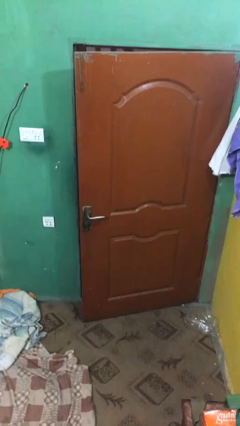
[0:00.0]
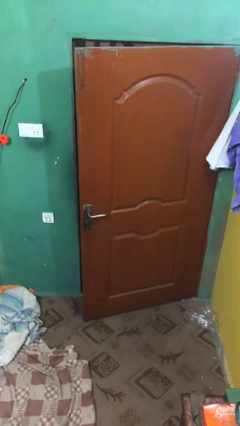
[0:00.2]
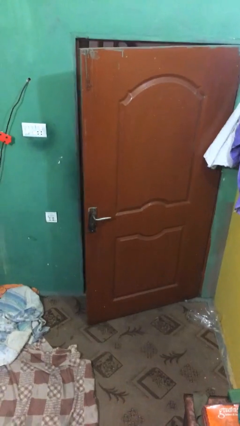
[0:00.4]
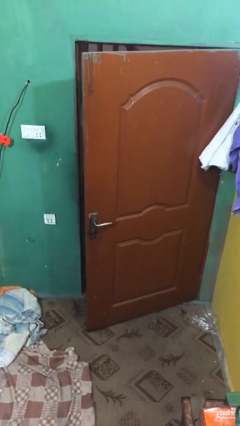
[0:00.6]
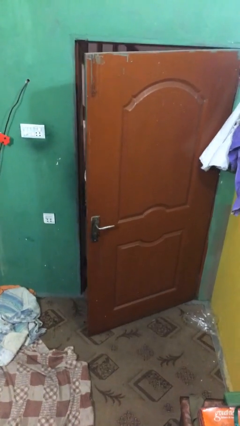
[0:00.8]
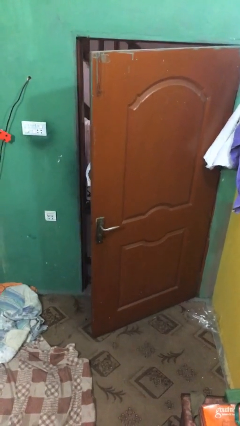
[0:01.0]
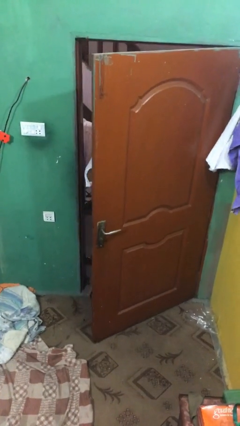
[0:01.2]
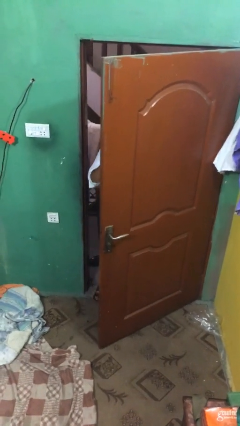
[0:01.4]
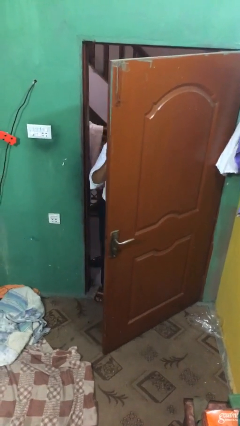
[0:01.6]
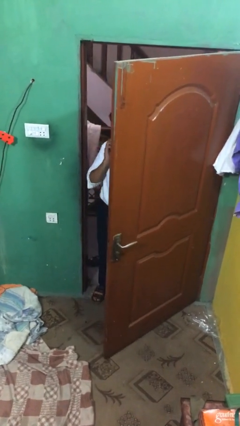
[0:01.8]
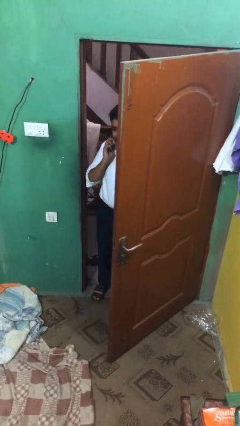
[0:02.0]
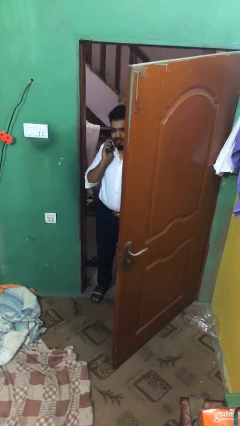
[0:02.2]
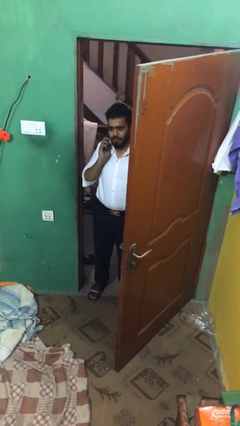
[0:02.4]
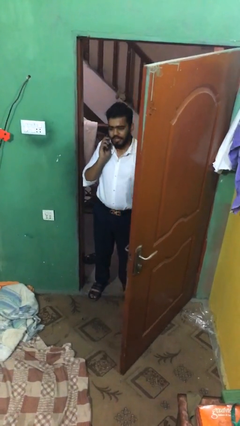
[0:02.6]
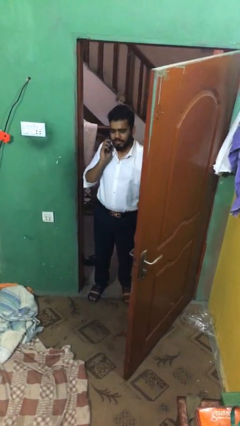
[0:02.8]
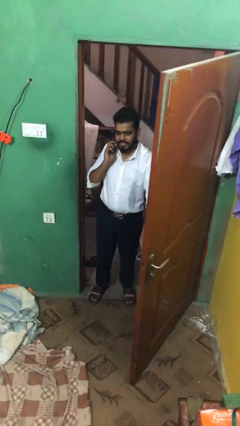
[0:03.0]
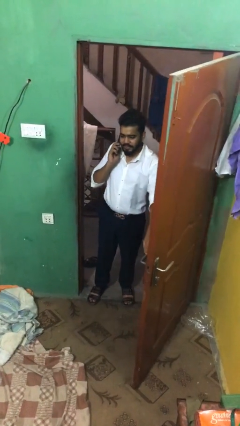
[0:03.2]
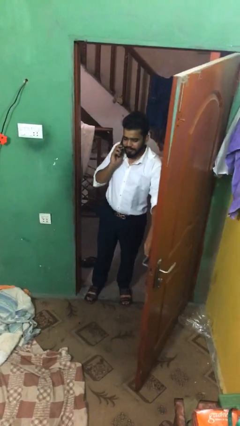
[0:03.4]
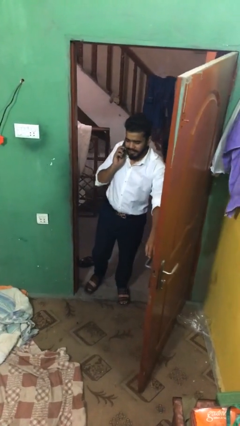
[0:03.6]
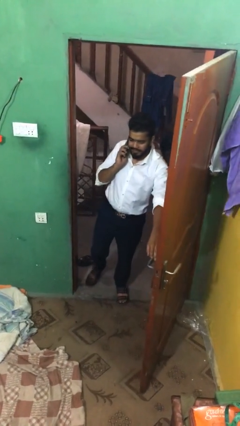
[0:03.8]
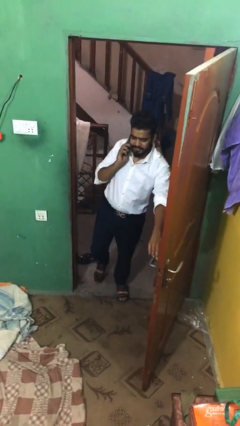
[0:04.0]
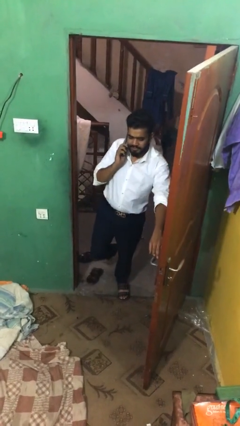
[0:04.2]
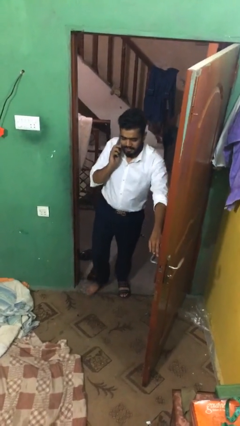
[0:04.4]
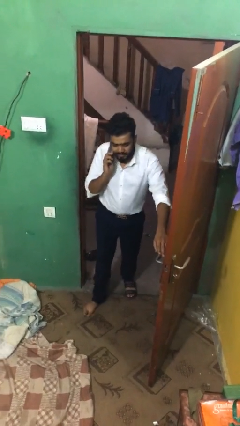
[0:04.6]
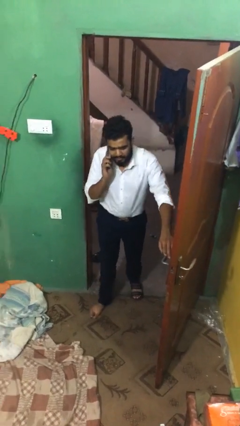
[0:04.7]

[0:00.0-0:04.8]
person opens facility door

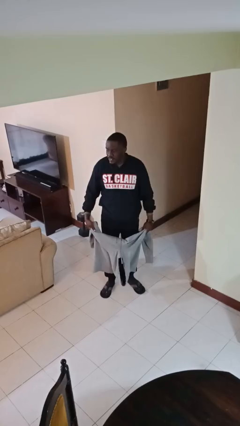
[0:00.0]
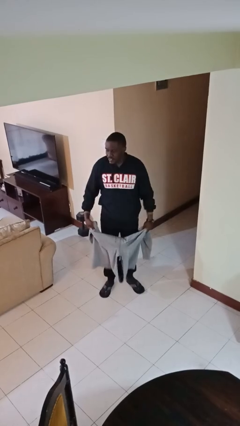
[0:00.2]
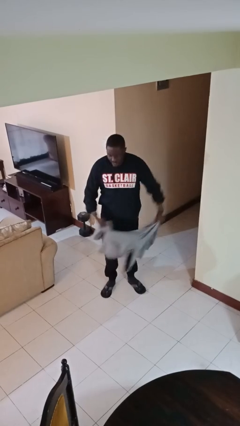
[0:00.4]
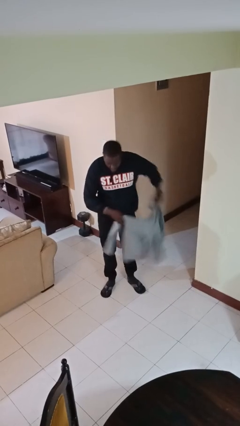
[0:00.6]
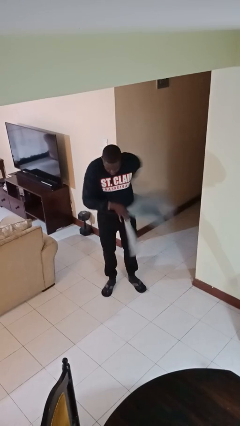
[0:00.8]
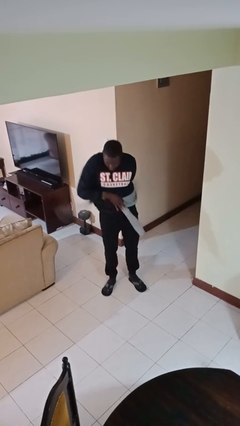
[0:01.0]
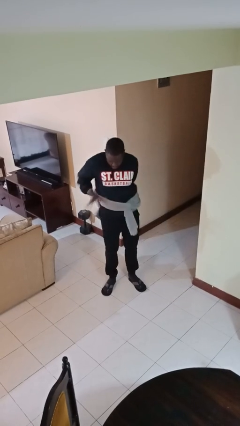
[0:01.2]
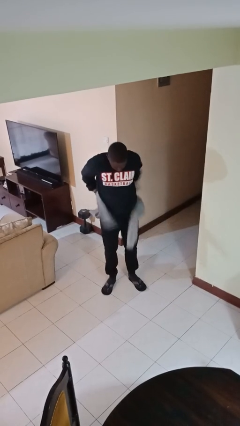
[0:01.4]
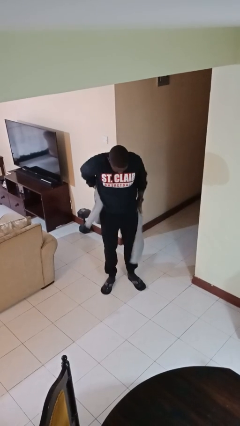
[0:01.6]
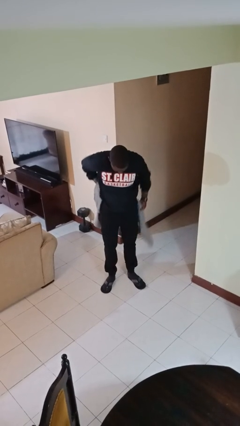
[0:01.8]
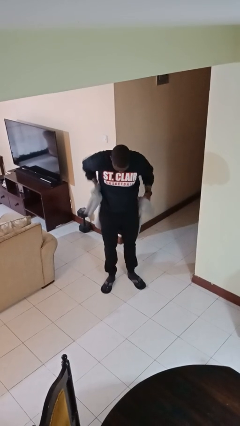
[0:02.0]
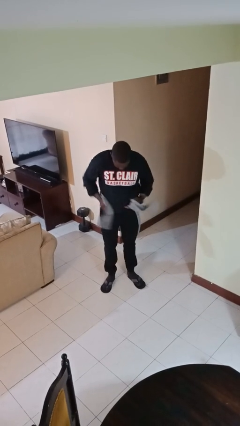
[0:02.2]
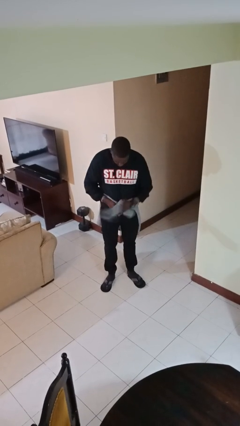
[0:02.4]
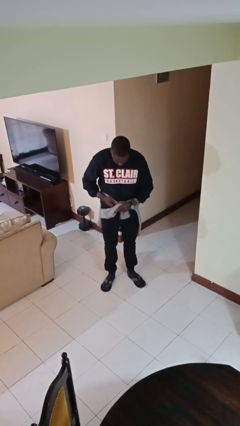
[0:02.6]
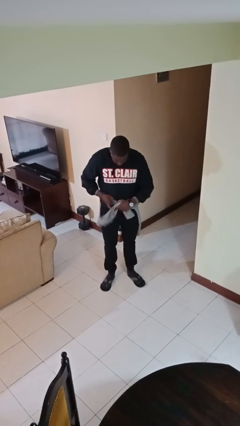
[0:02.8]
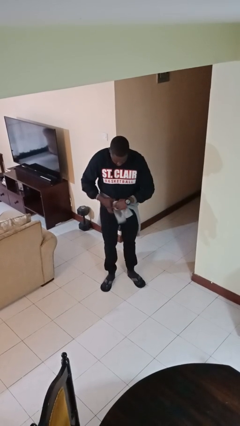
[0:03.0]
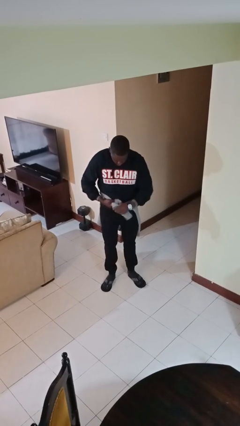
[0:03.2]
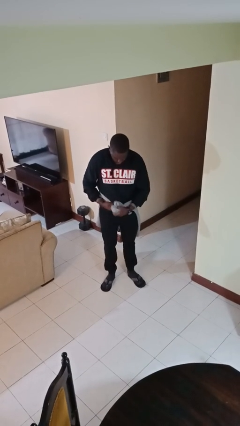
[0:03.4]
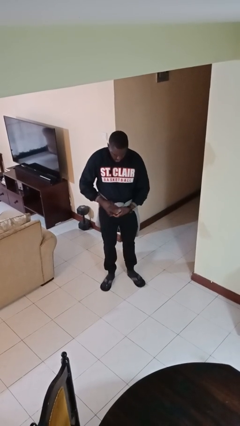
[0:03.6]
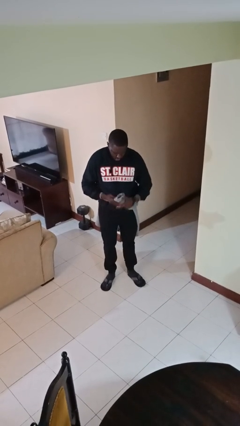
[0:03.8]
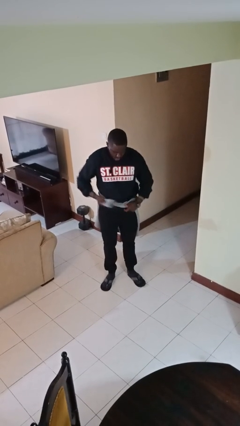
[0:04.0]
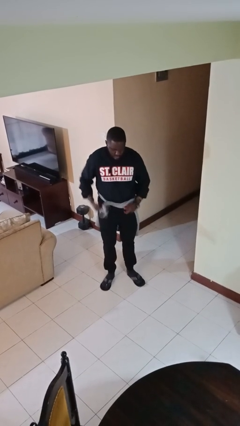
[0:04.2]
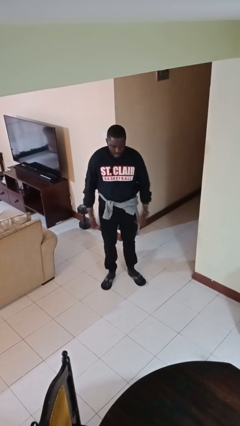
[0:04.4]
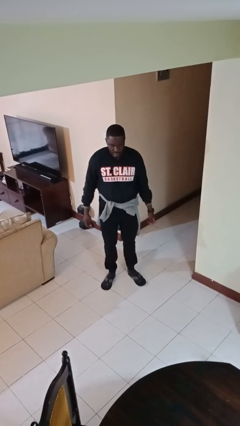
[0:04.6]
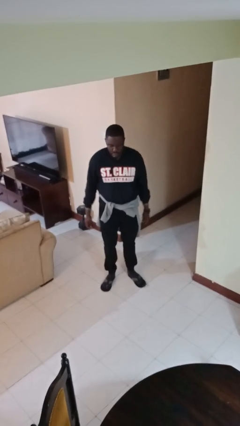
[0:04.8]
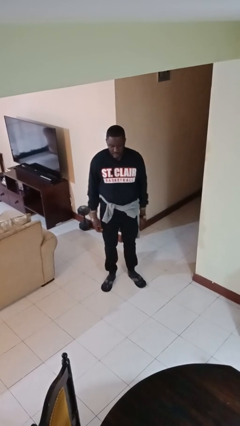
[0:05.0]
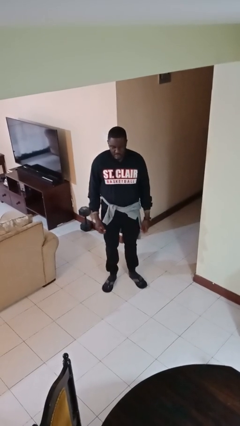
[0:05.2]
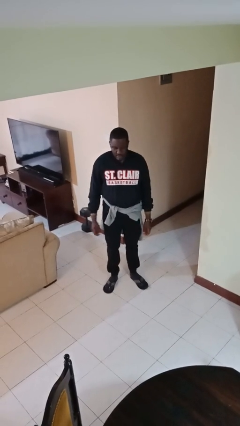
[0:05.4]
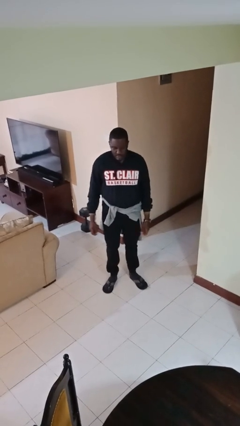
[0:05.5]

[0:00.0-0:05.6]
person ties jacket around waist

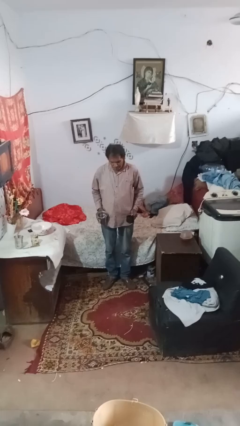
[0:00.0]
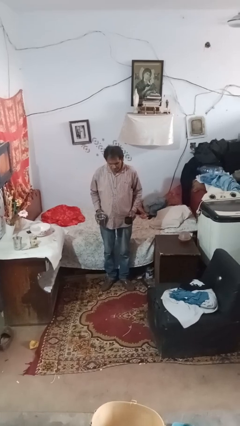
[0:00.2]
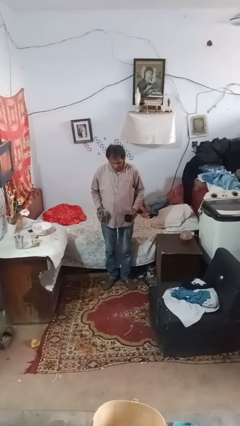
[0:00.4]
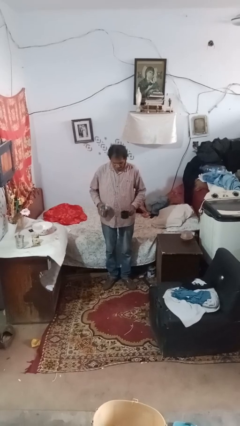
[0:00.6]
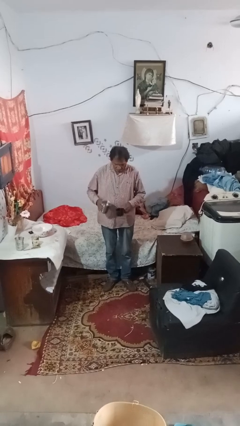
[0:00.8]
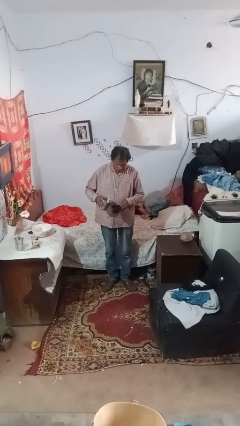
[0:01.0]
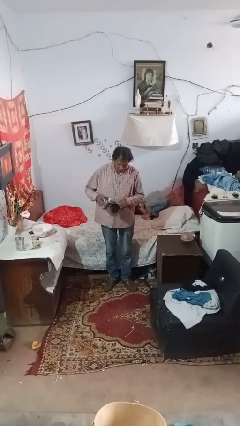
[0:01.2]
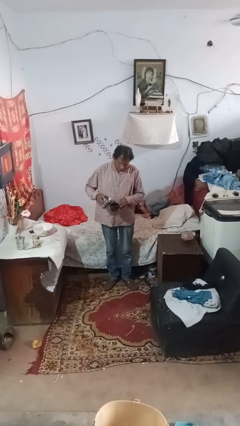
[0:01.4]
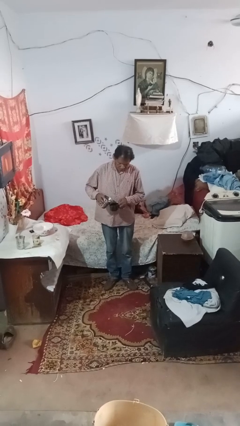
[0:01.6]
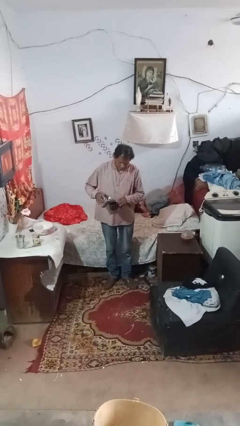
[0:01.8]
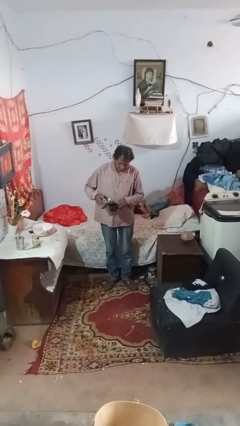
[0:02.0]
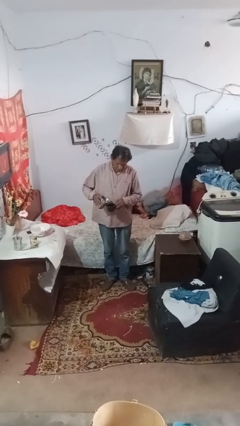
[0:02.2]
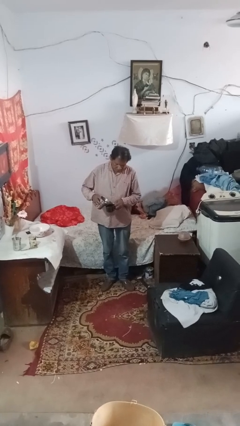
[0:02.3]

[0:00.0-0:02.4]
person pours liquid into cup

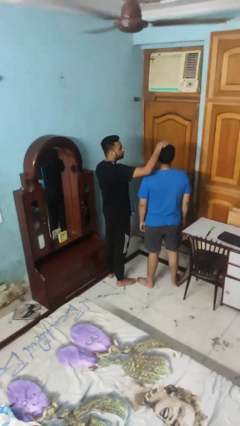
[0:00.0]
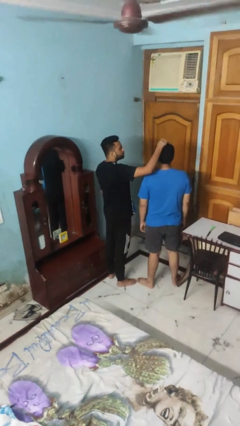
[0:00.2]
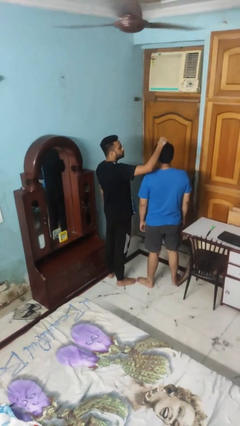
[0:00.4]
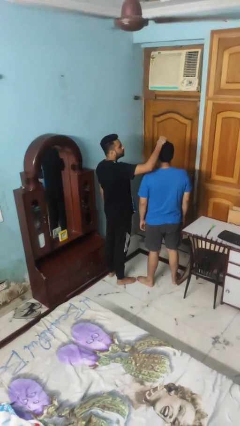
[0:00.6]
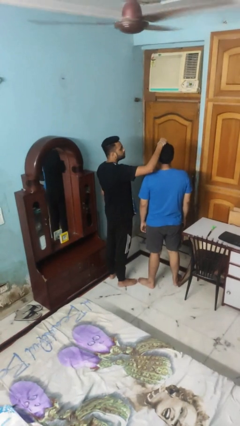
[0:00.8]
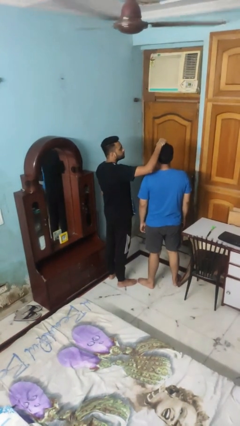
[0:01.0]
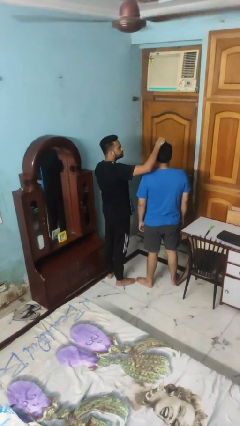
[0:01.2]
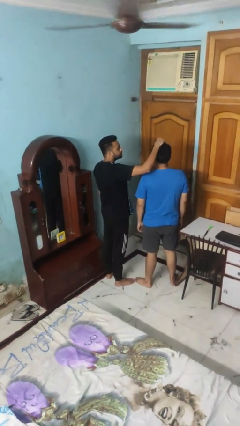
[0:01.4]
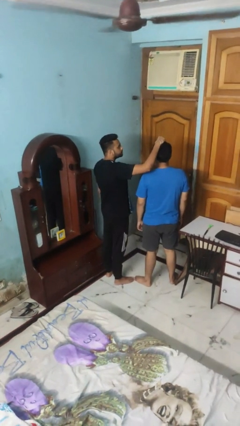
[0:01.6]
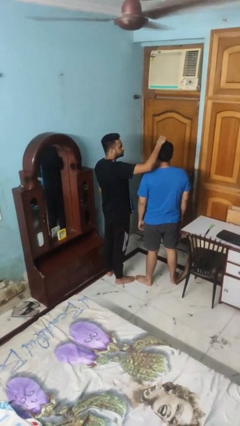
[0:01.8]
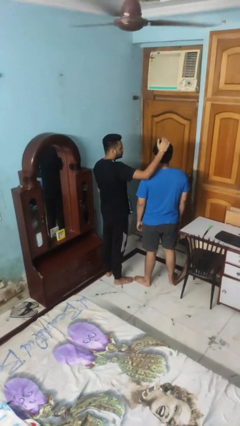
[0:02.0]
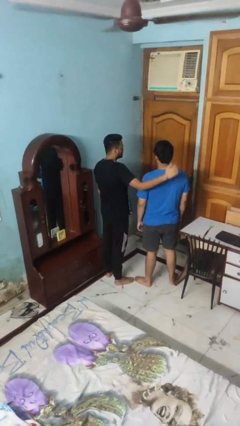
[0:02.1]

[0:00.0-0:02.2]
person grabs person by hair

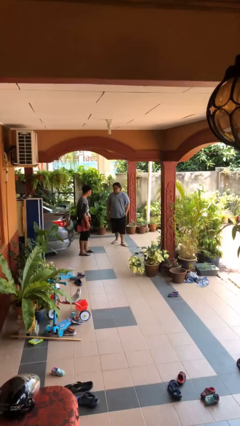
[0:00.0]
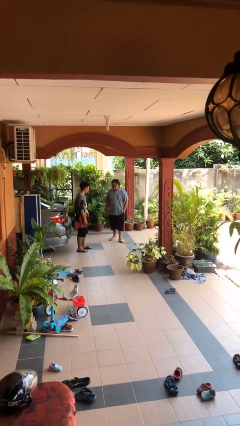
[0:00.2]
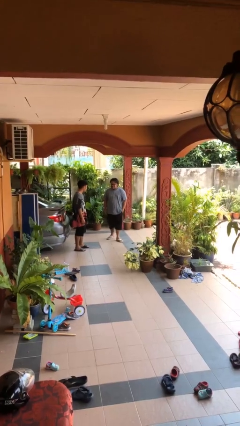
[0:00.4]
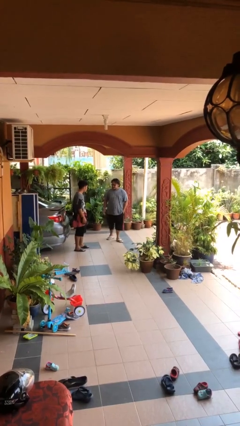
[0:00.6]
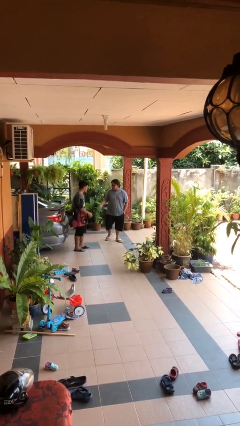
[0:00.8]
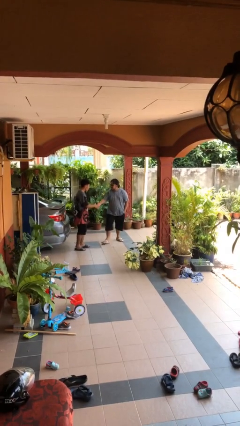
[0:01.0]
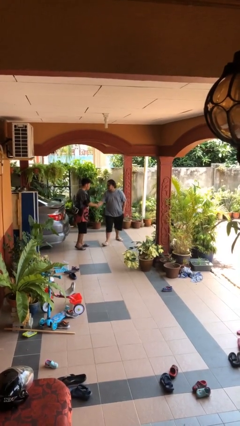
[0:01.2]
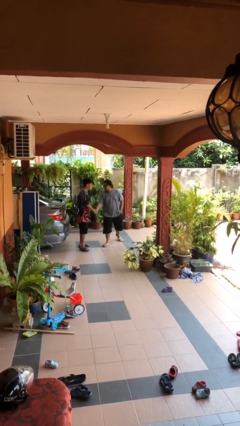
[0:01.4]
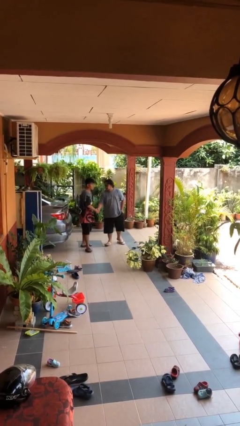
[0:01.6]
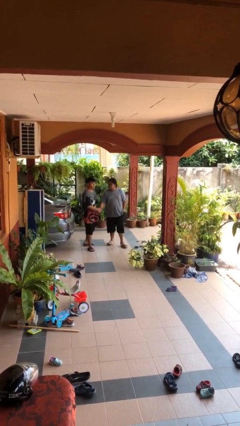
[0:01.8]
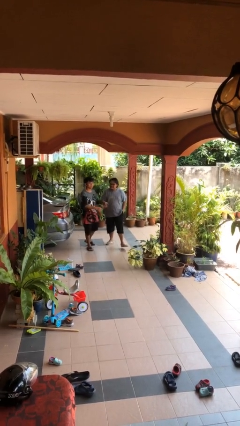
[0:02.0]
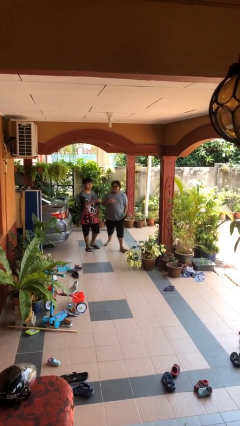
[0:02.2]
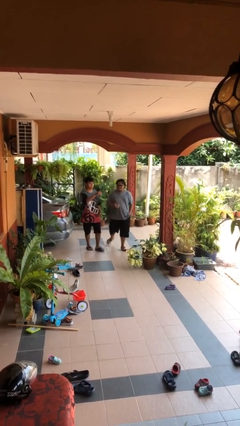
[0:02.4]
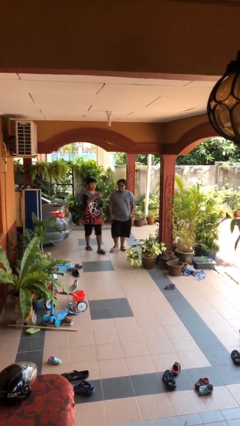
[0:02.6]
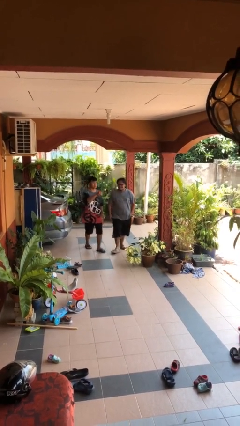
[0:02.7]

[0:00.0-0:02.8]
person shakes hand
